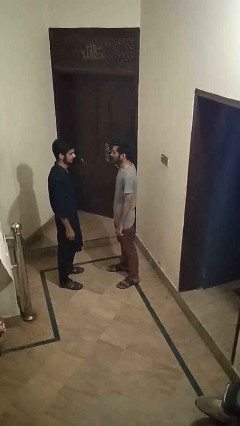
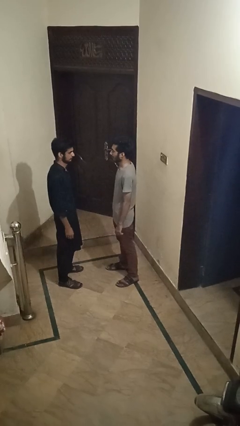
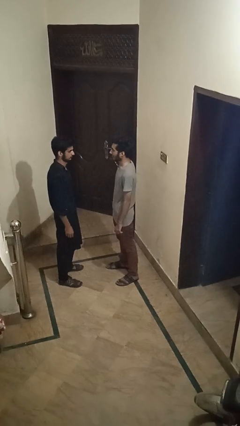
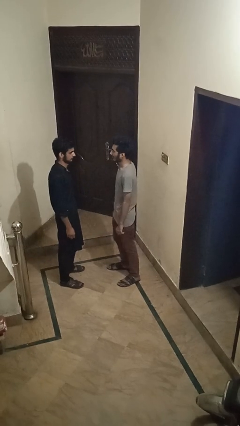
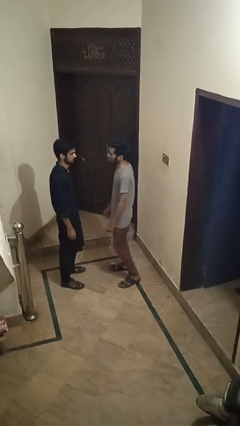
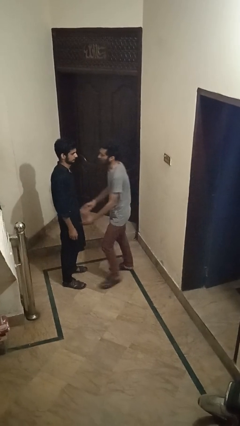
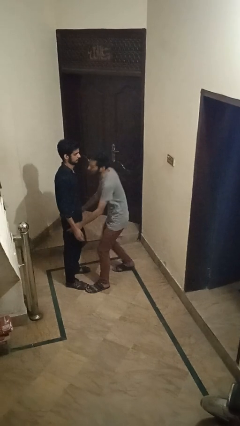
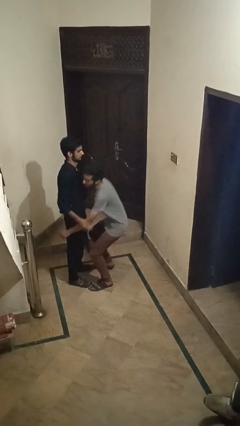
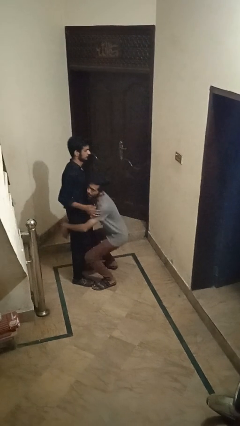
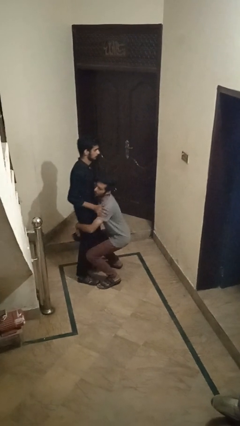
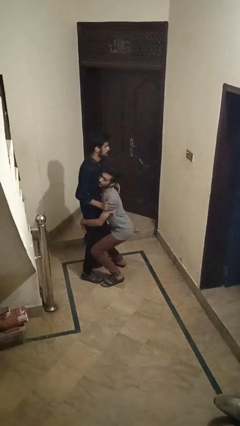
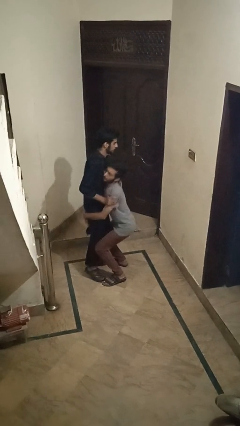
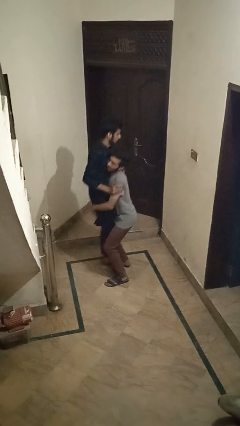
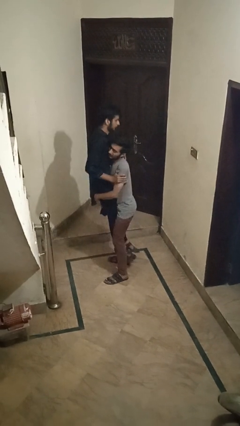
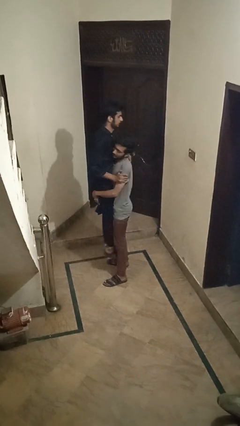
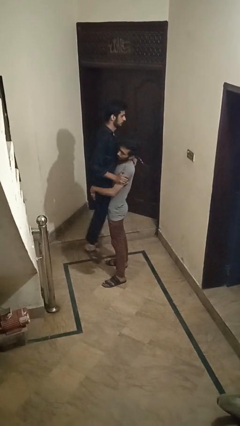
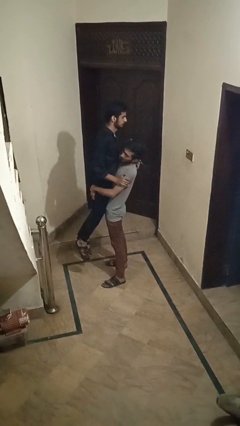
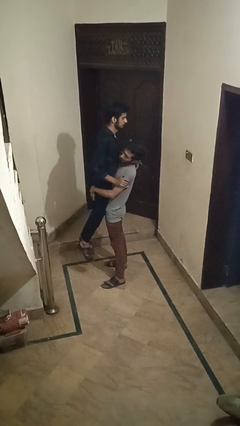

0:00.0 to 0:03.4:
person picks up person

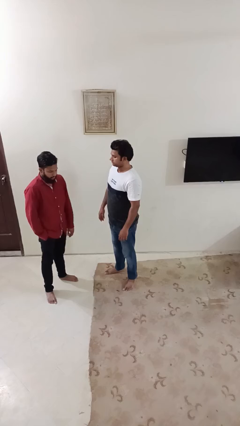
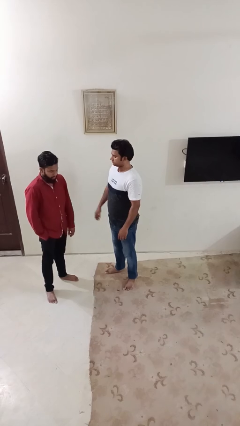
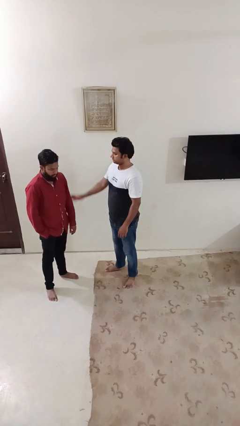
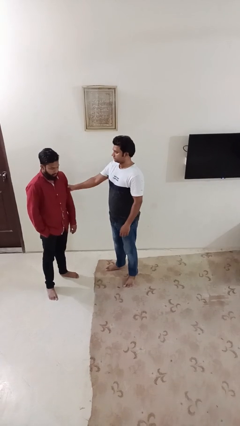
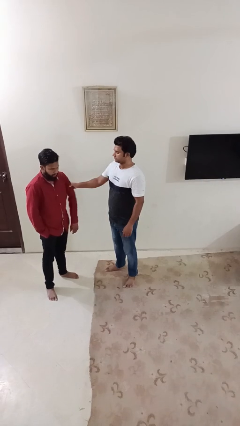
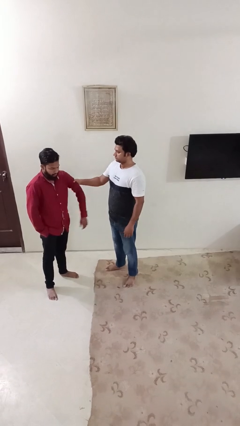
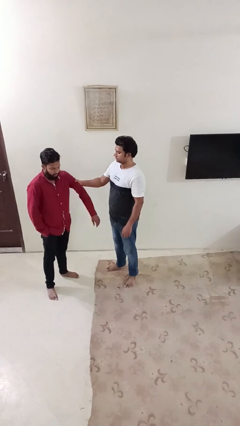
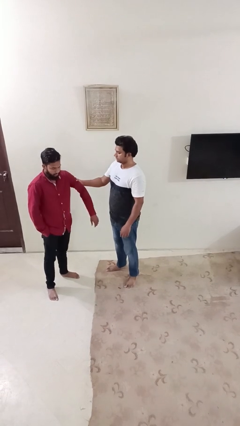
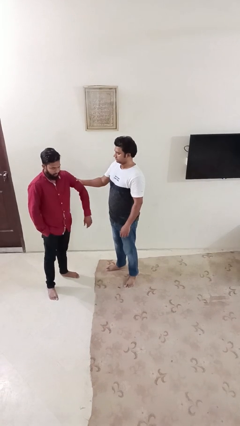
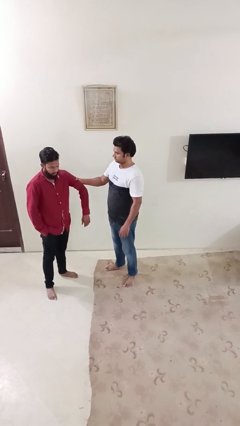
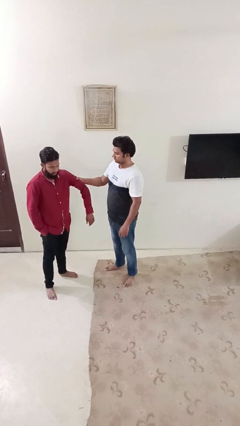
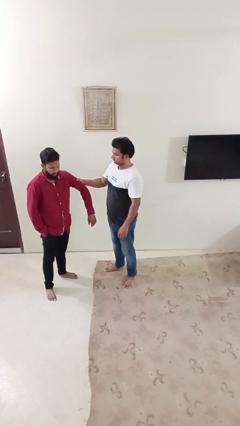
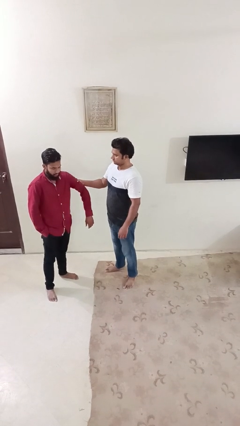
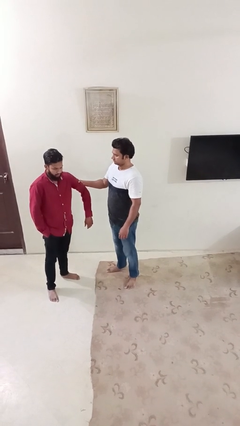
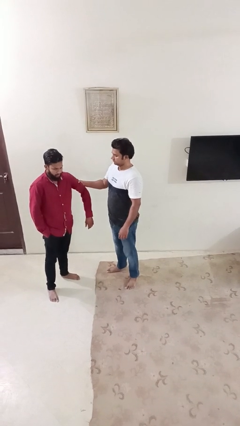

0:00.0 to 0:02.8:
person grabs person by bicep

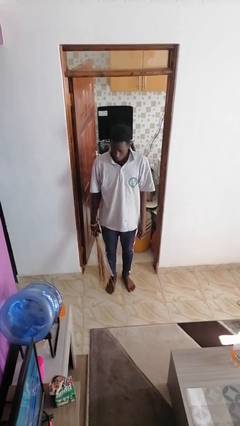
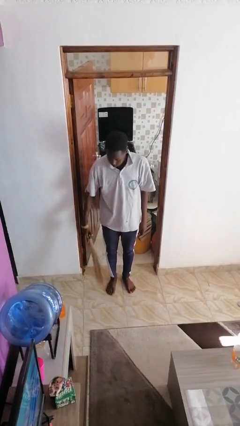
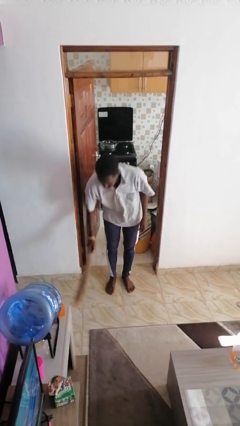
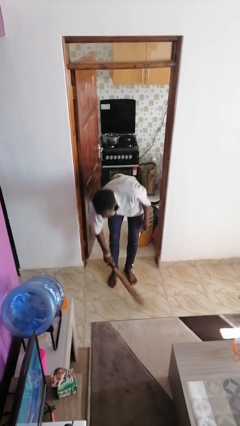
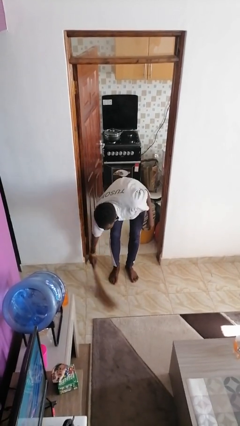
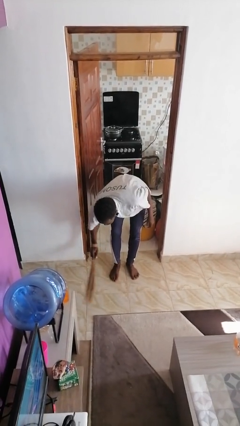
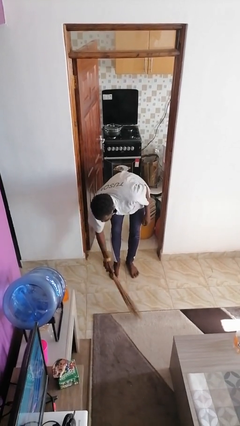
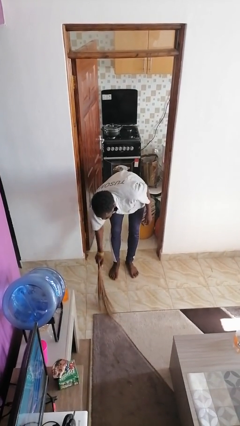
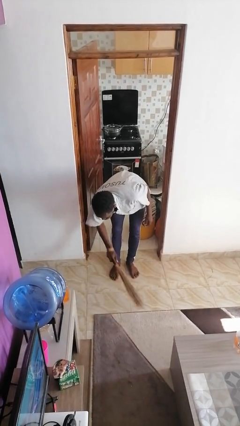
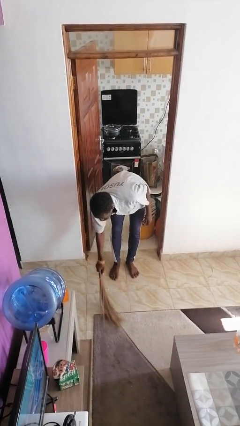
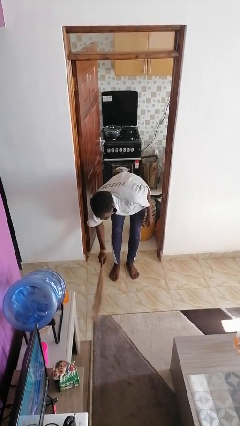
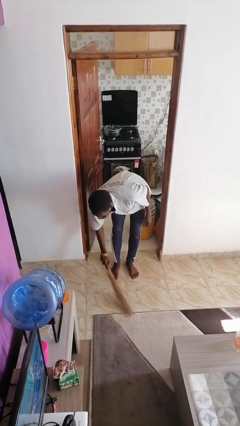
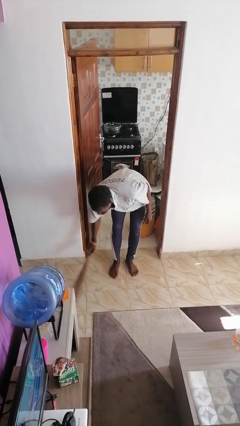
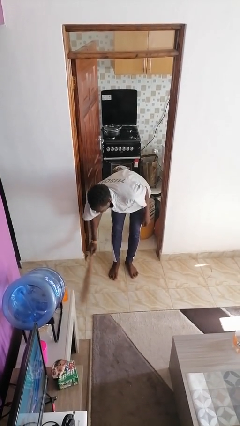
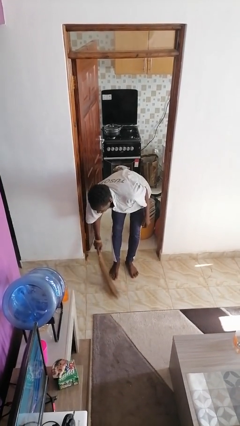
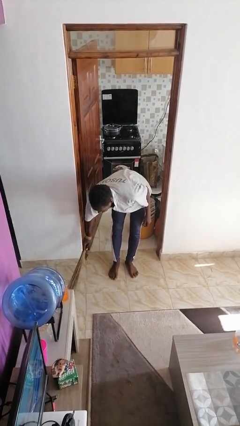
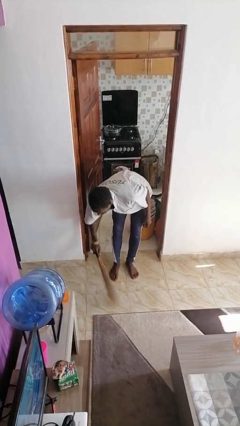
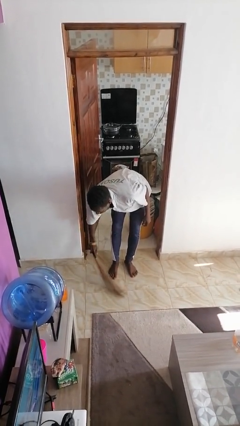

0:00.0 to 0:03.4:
person sweeps floor

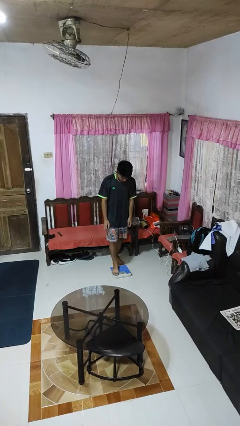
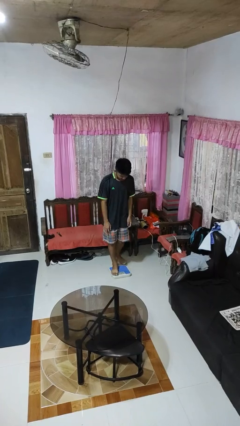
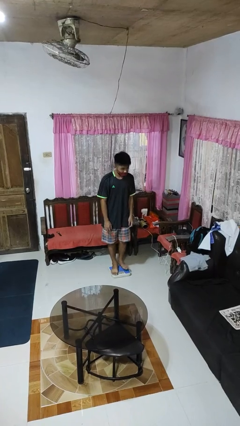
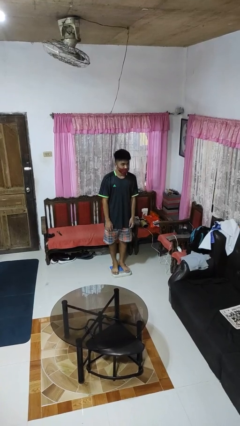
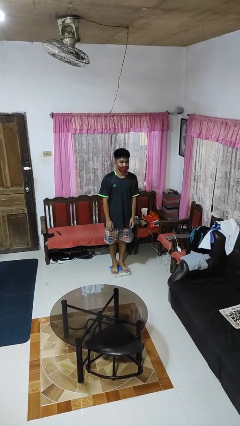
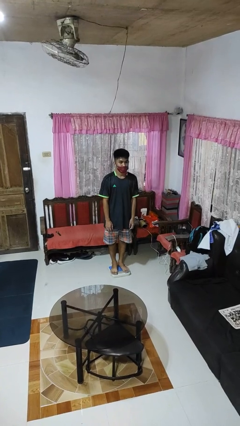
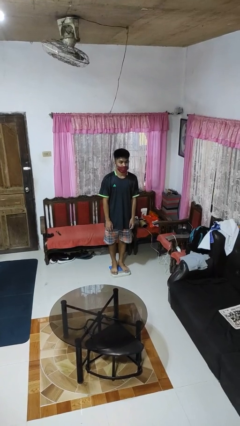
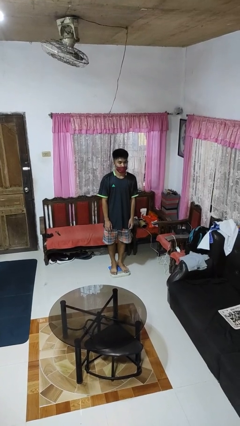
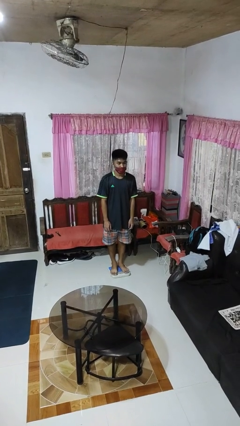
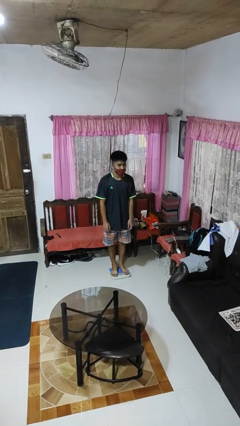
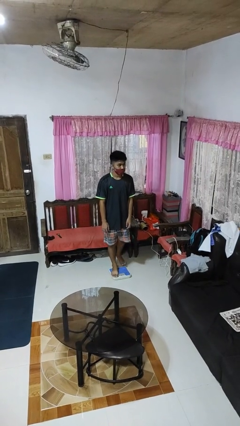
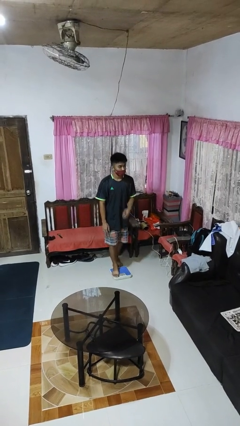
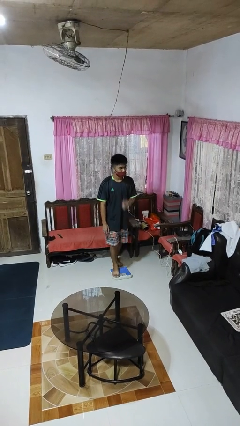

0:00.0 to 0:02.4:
person uses bodyweight scale

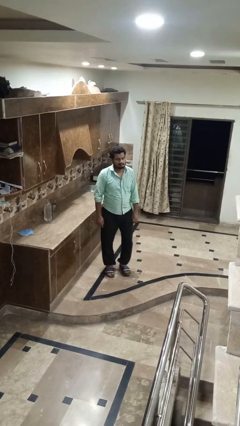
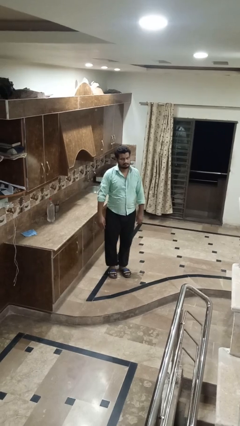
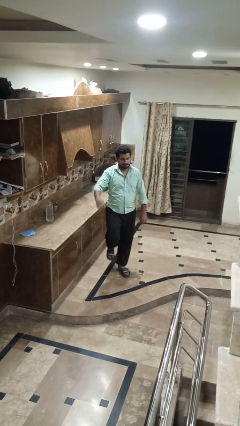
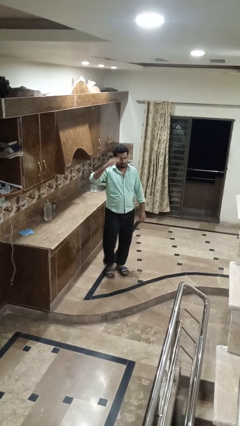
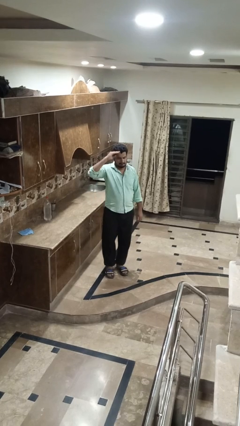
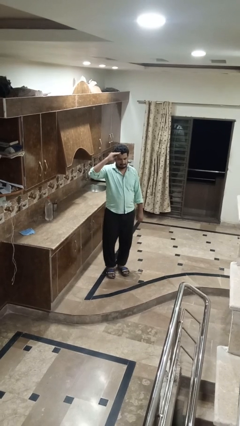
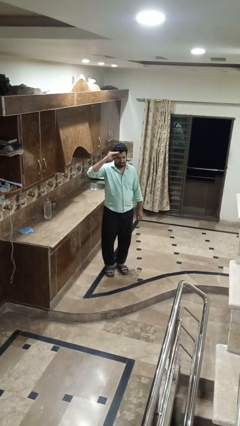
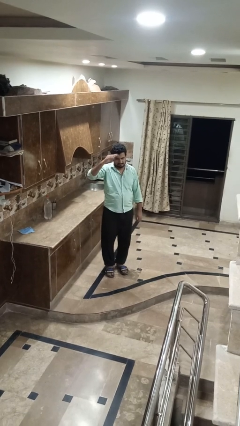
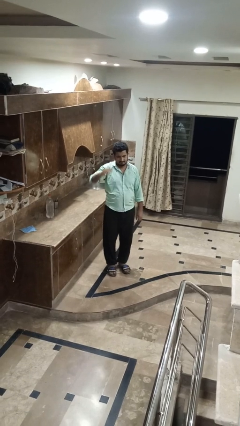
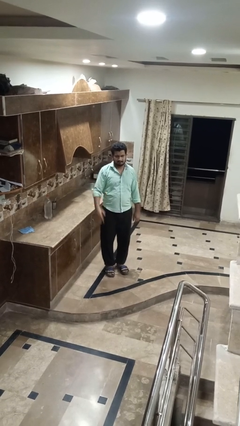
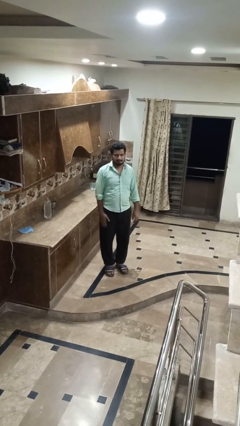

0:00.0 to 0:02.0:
person salutes

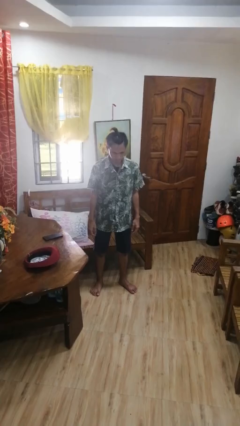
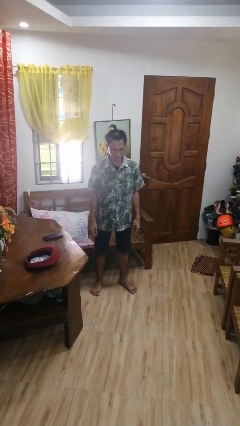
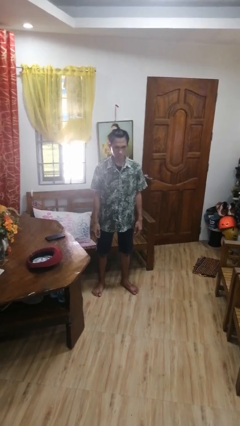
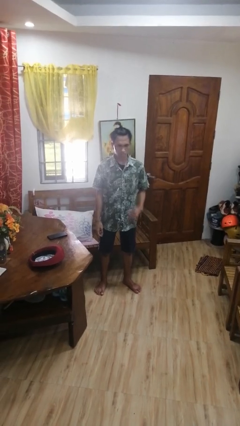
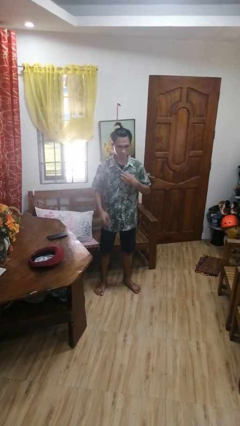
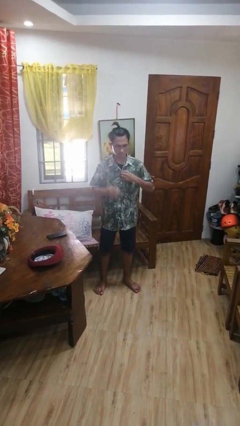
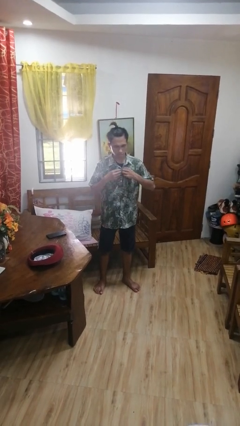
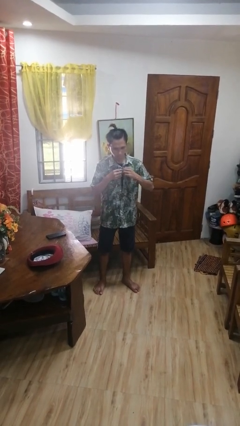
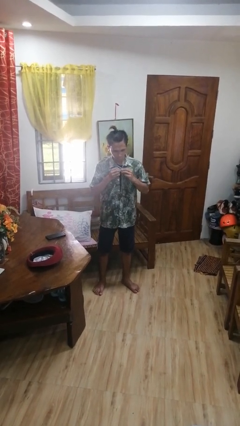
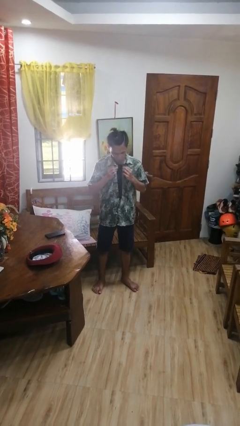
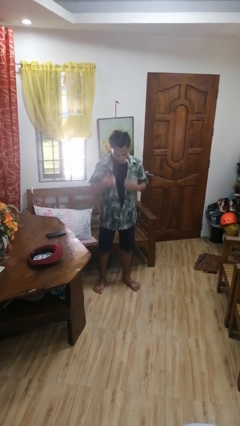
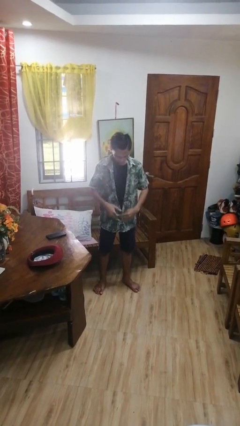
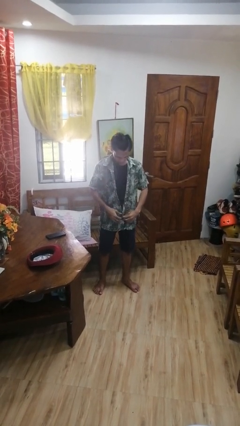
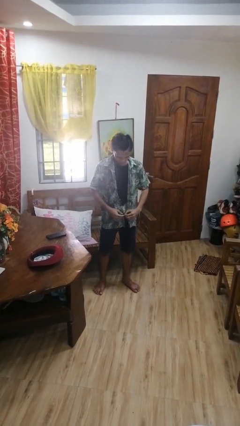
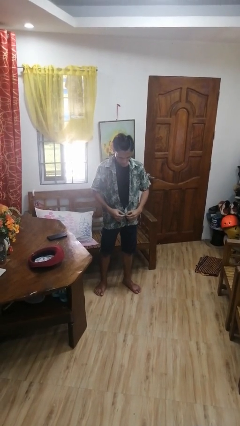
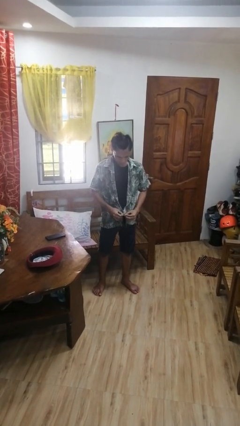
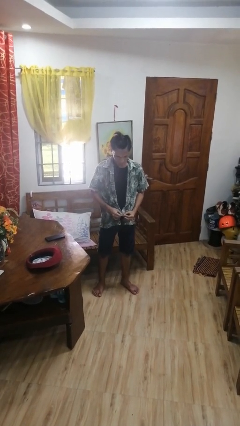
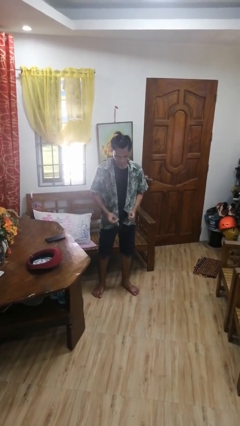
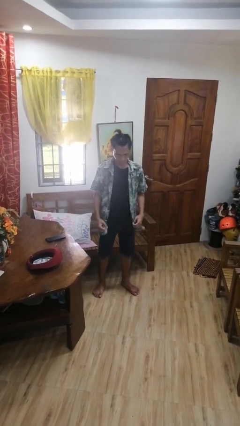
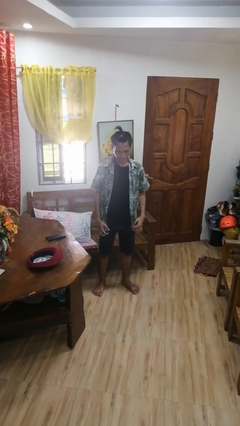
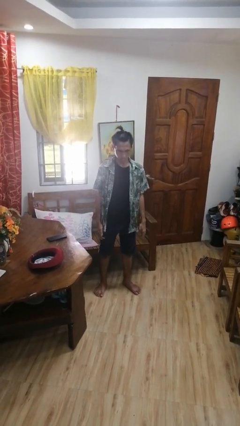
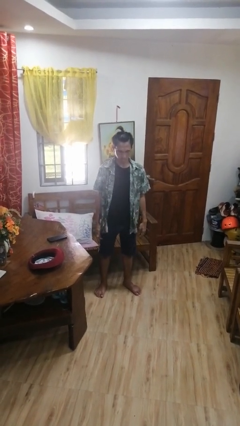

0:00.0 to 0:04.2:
person unbuttons shirt
